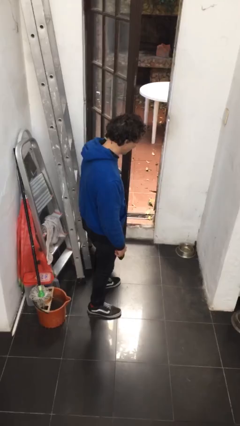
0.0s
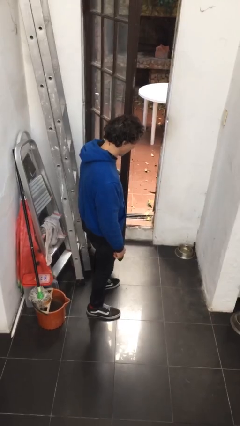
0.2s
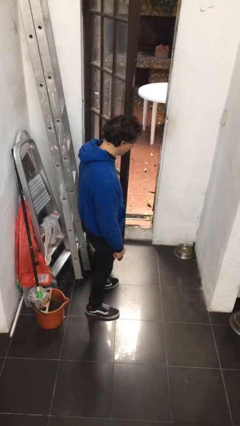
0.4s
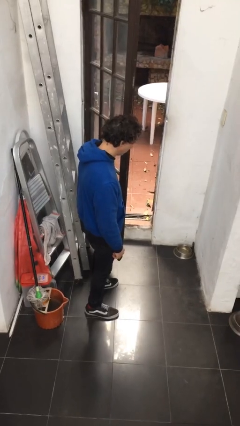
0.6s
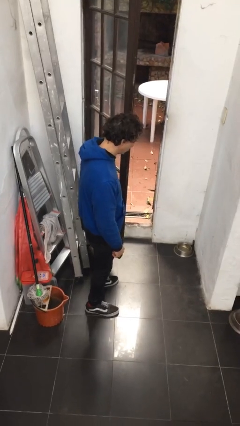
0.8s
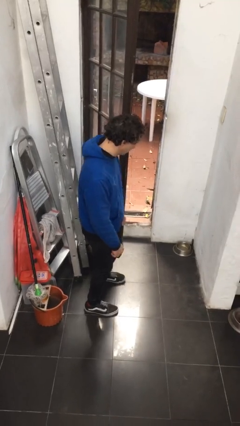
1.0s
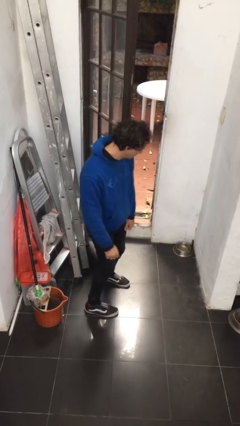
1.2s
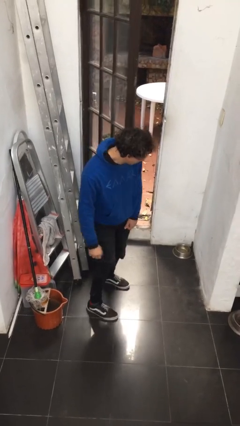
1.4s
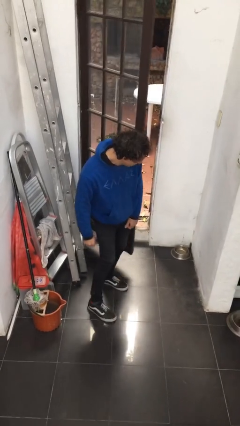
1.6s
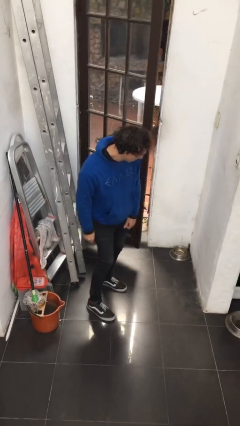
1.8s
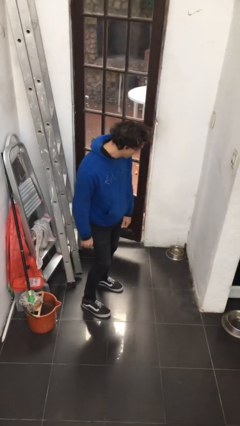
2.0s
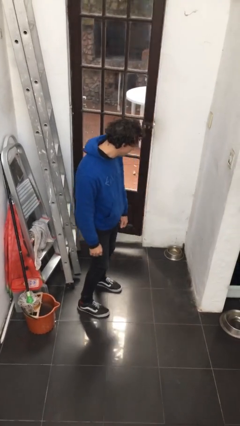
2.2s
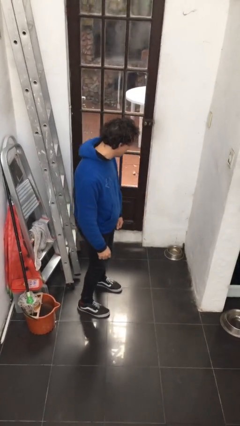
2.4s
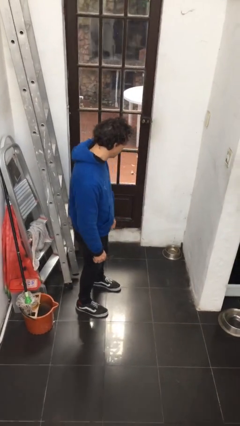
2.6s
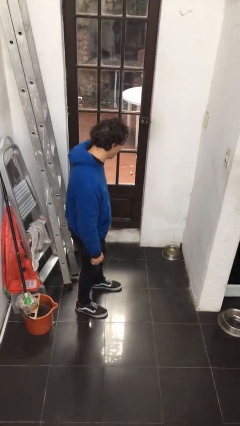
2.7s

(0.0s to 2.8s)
person closes door with hip

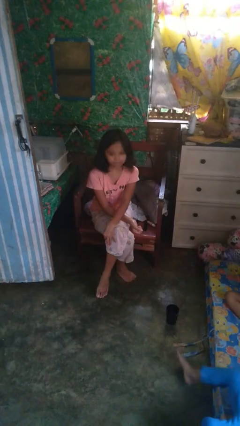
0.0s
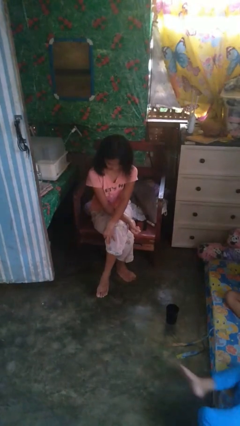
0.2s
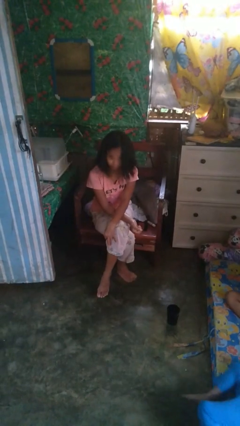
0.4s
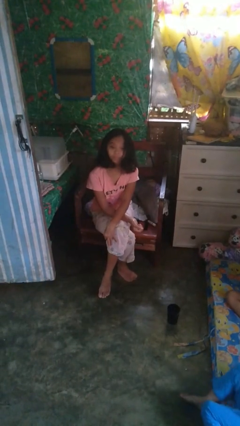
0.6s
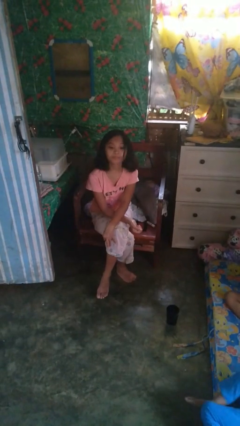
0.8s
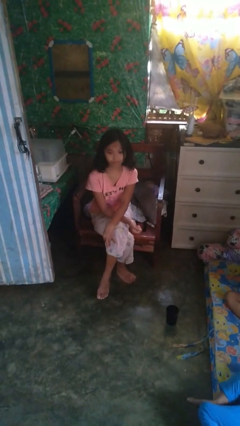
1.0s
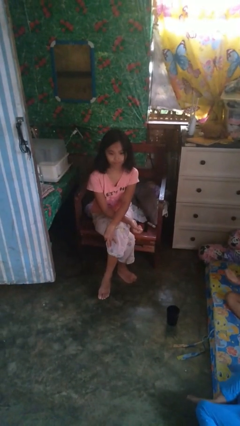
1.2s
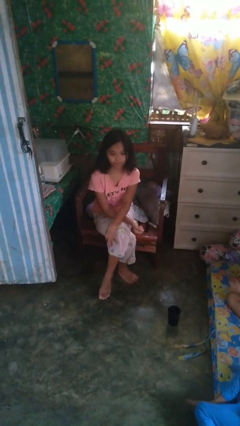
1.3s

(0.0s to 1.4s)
person nods head

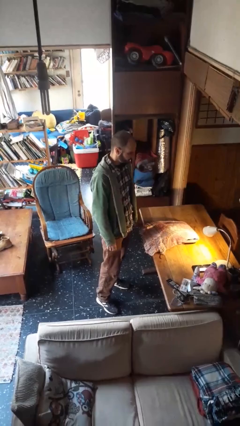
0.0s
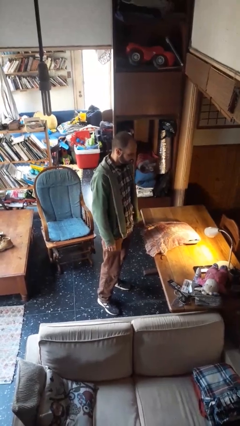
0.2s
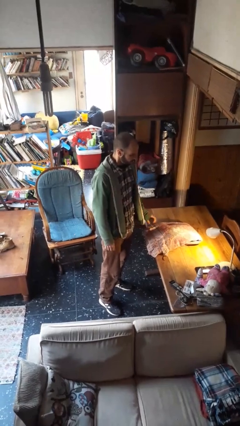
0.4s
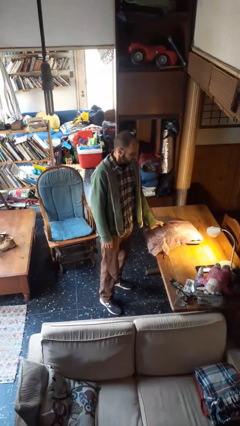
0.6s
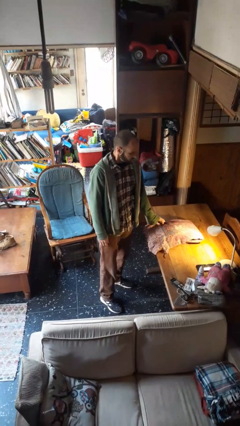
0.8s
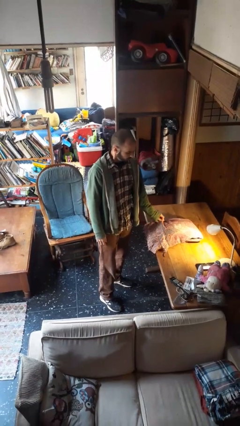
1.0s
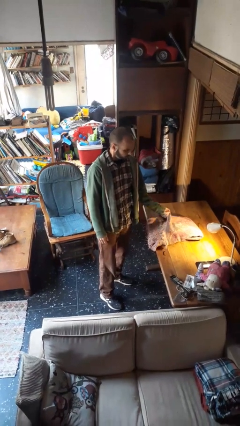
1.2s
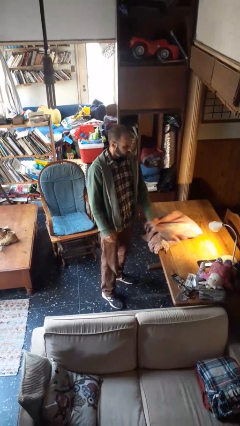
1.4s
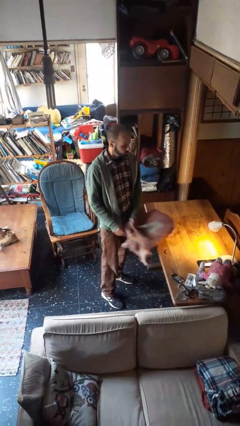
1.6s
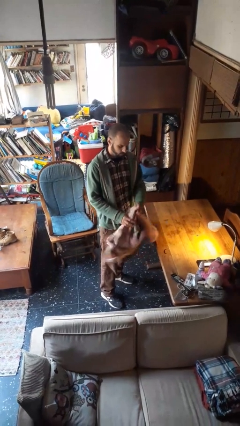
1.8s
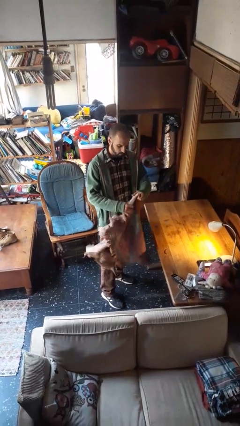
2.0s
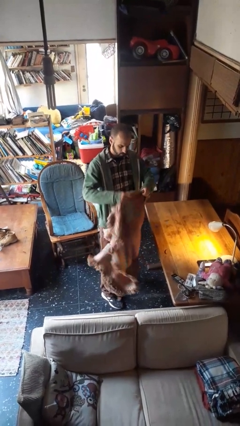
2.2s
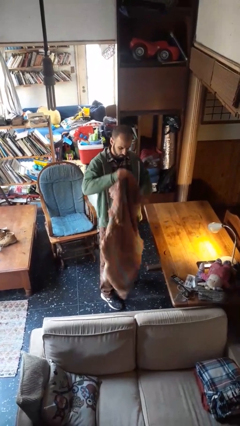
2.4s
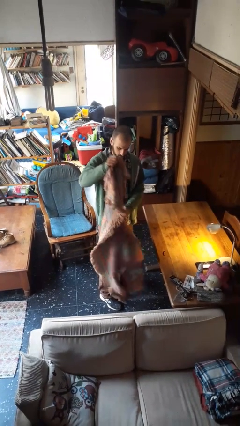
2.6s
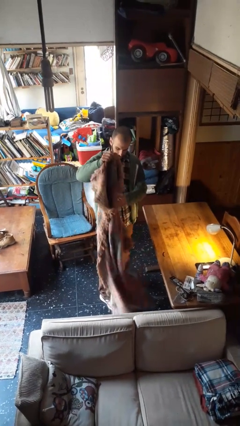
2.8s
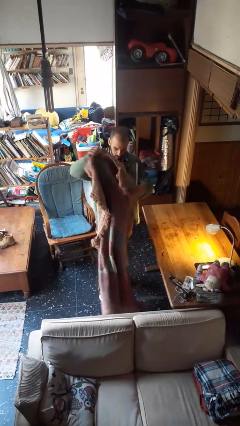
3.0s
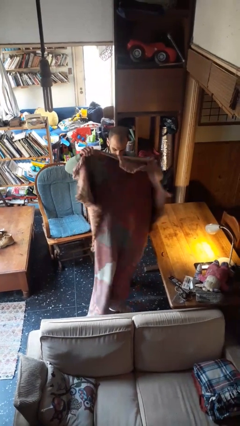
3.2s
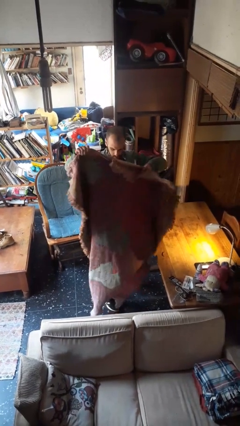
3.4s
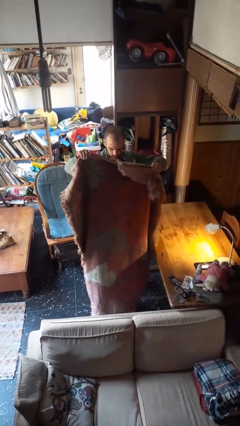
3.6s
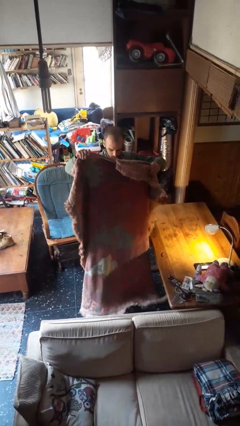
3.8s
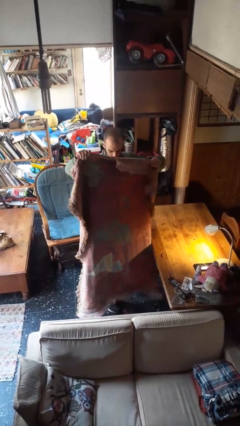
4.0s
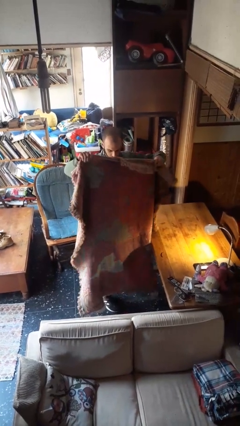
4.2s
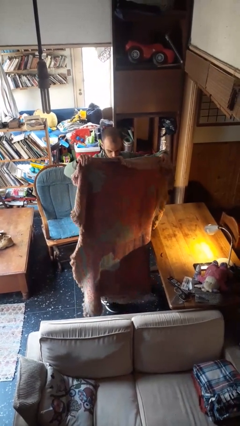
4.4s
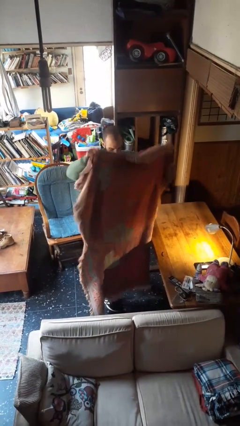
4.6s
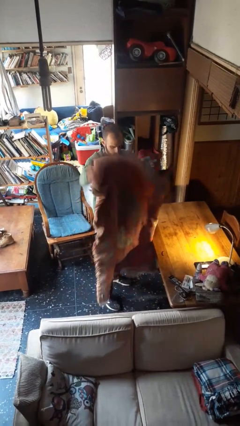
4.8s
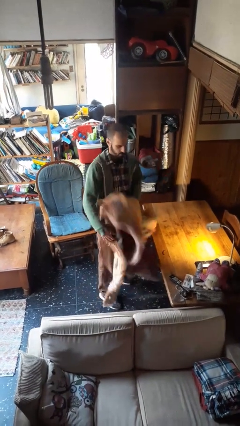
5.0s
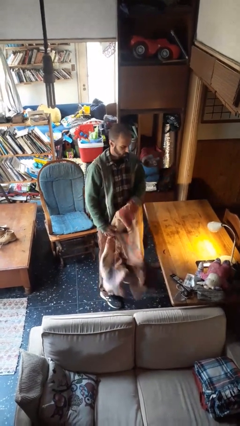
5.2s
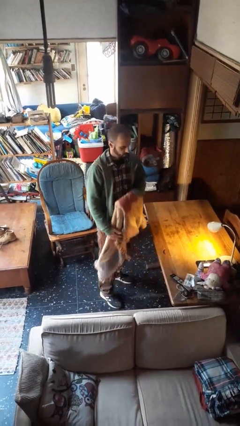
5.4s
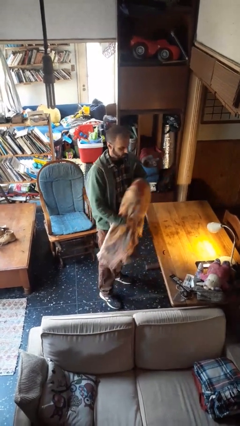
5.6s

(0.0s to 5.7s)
person unfolds blanket

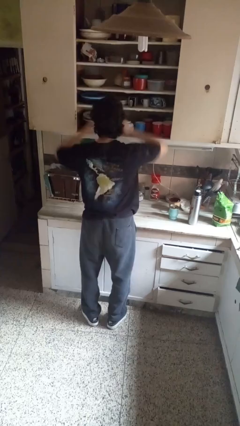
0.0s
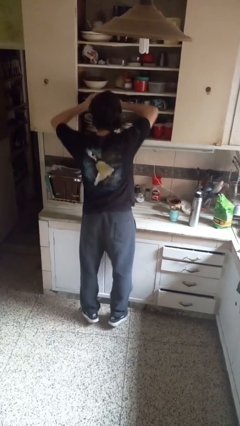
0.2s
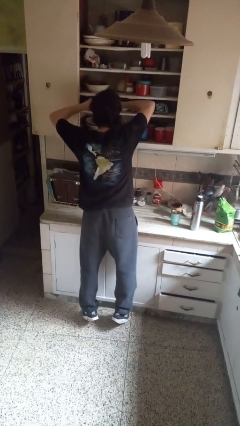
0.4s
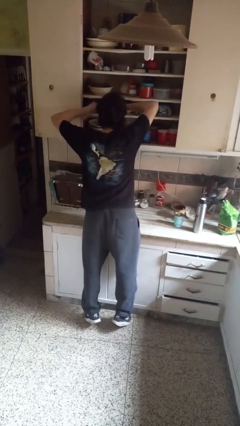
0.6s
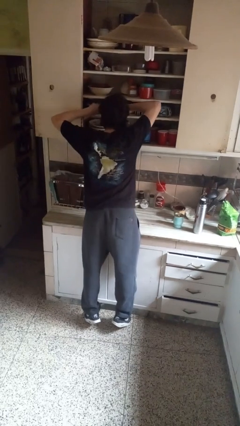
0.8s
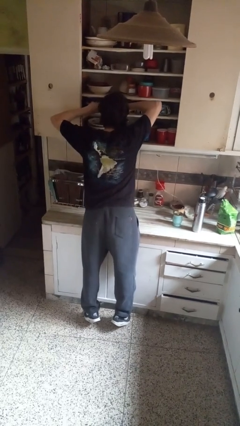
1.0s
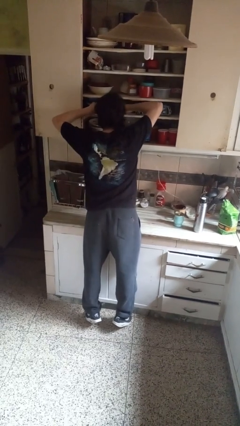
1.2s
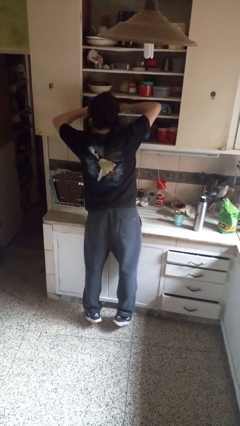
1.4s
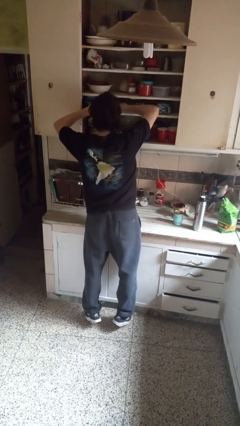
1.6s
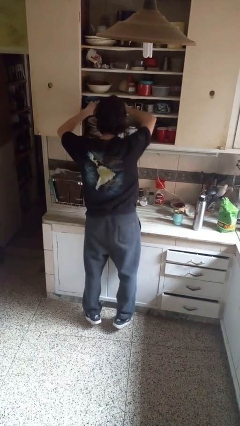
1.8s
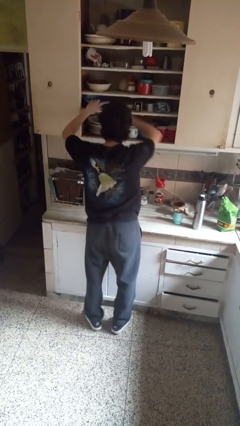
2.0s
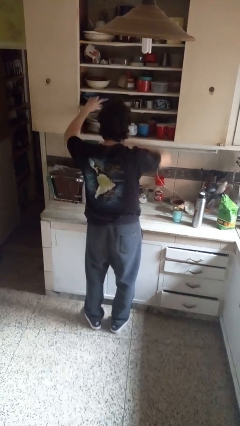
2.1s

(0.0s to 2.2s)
person searches in cabinet

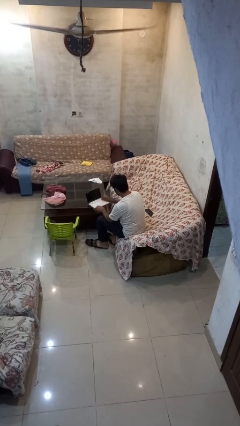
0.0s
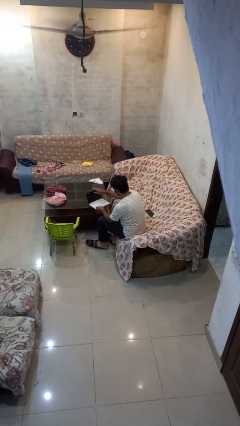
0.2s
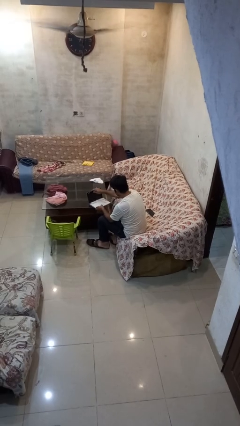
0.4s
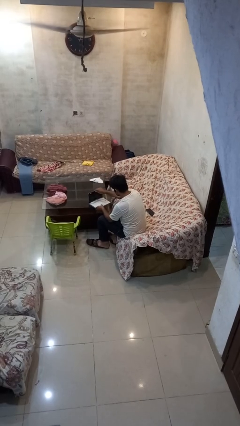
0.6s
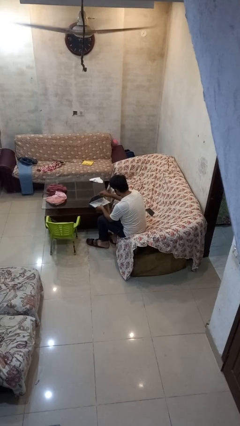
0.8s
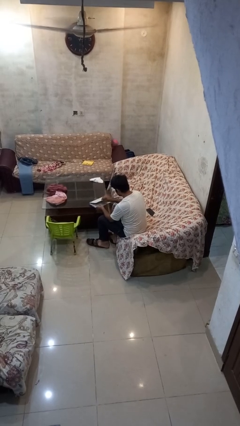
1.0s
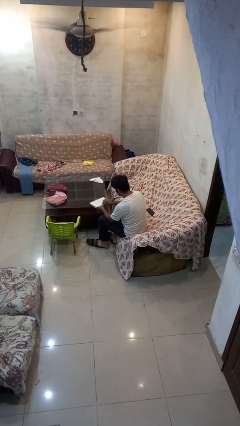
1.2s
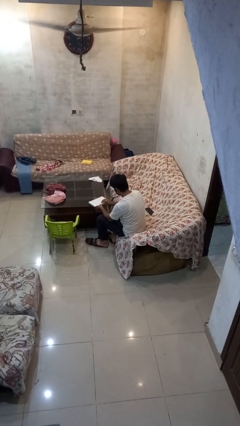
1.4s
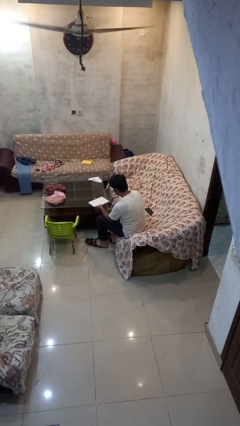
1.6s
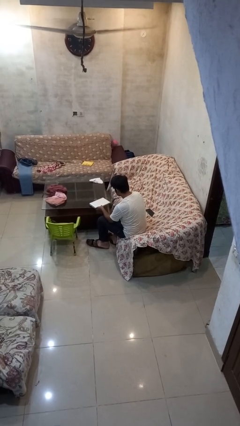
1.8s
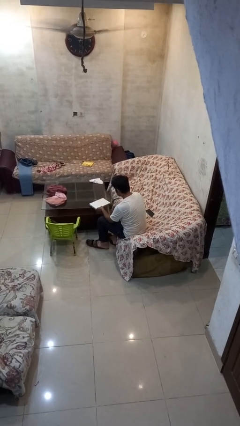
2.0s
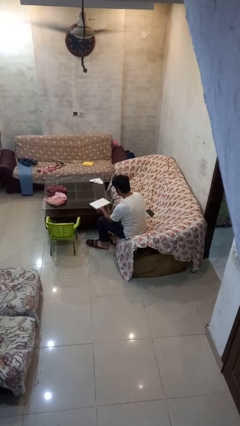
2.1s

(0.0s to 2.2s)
person closes laptop

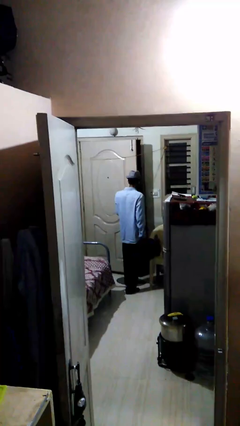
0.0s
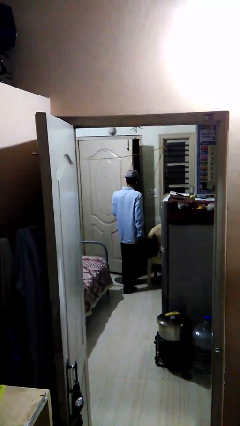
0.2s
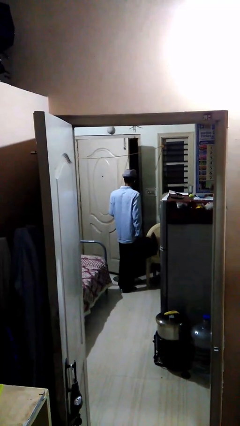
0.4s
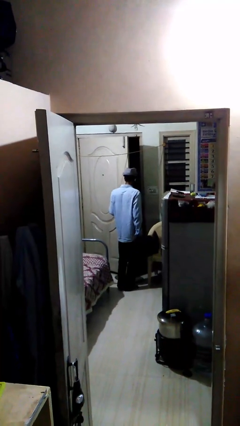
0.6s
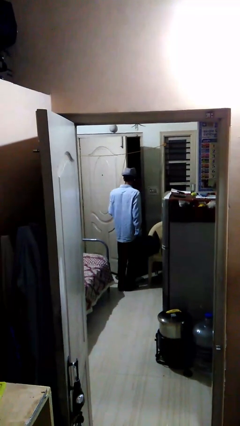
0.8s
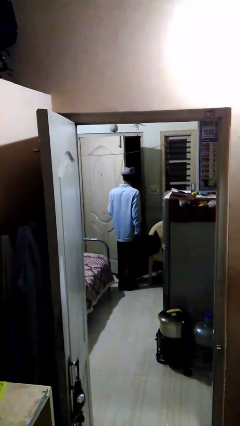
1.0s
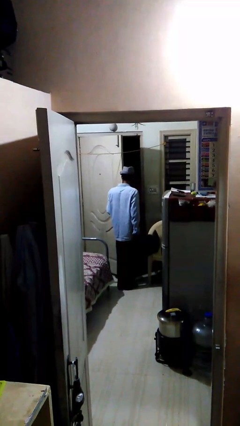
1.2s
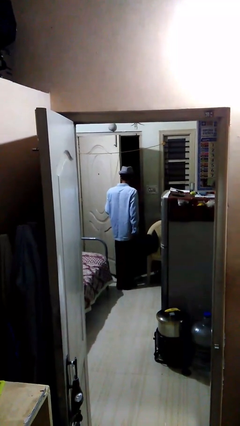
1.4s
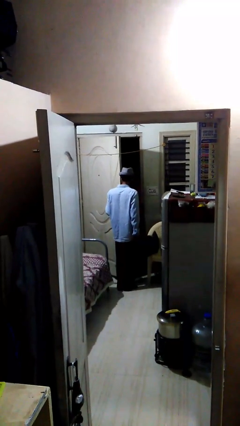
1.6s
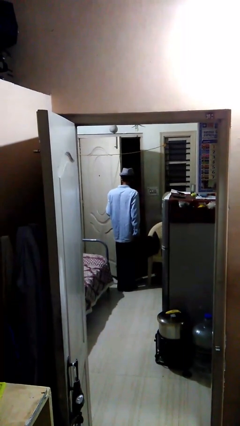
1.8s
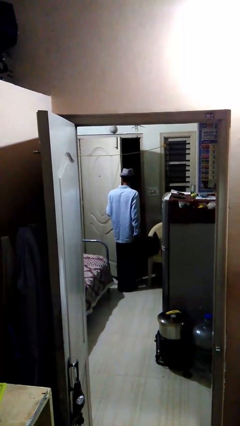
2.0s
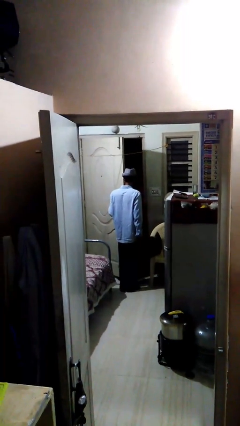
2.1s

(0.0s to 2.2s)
person opens facility door

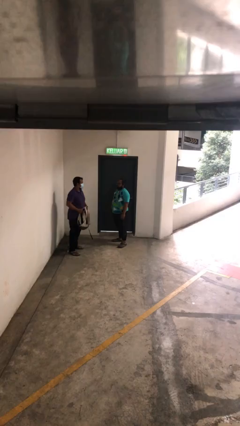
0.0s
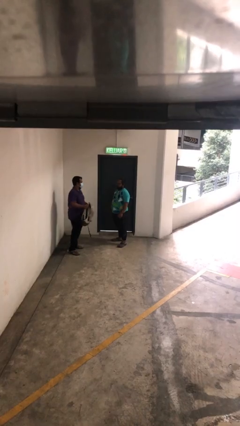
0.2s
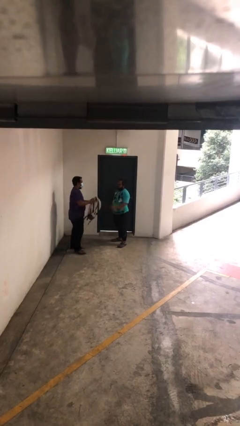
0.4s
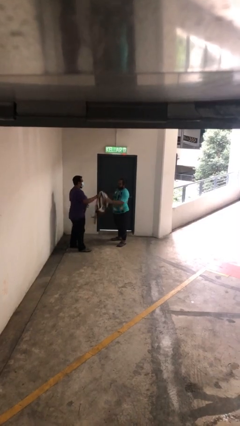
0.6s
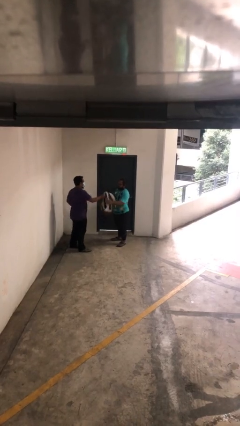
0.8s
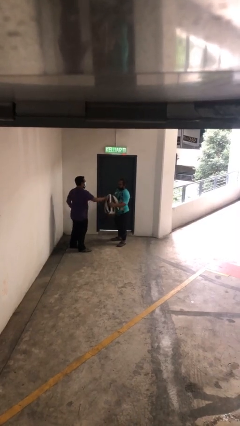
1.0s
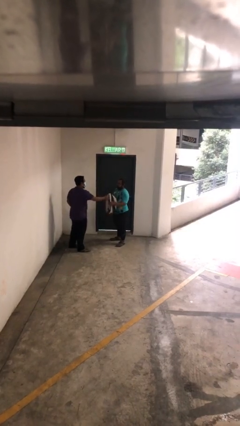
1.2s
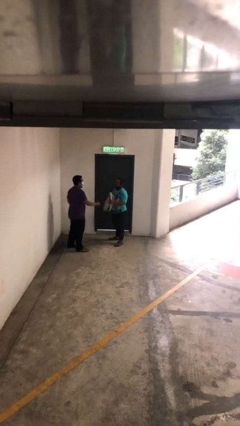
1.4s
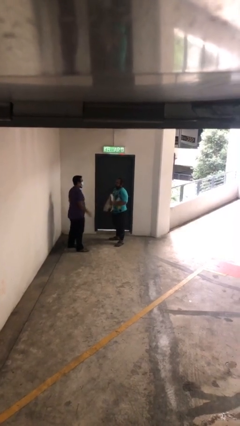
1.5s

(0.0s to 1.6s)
person transfers object to person
